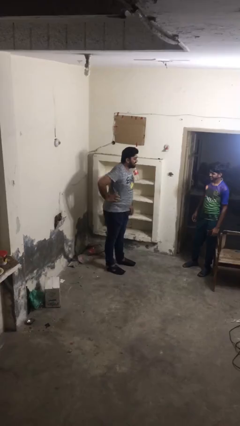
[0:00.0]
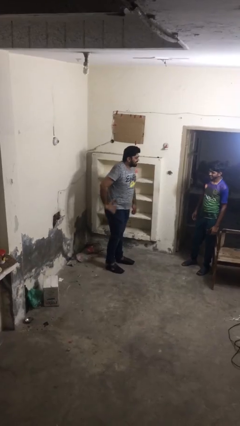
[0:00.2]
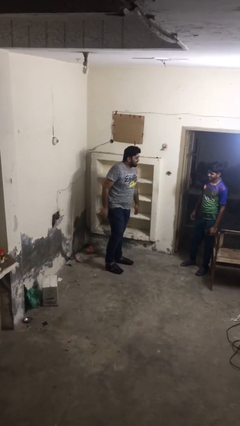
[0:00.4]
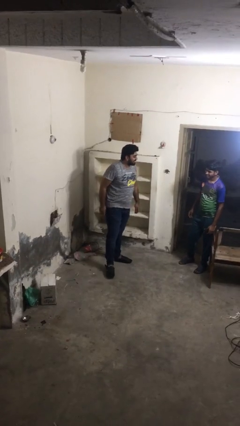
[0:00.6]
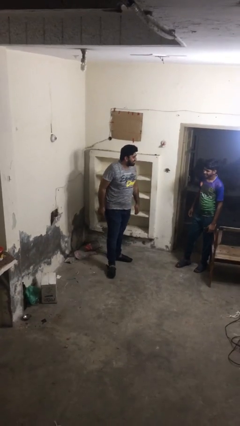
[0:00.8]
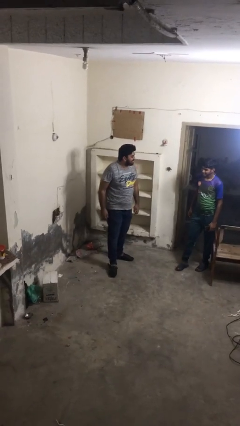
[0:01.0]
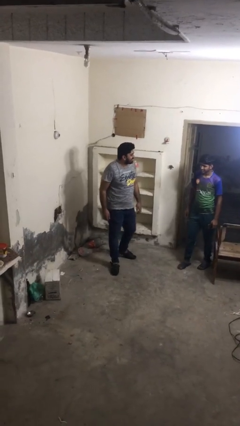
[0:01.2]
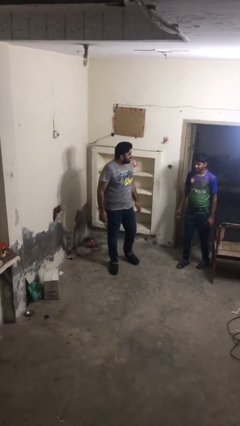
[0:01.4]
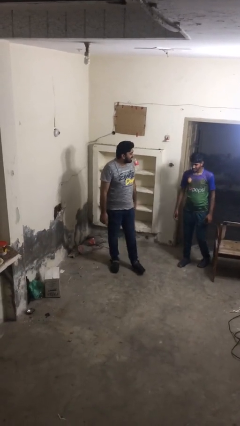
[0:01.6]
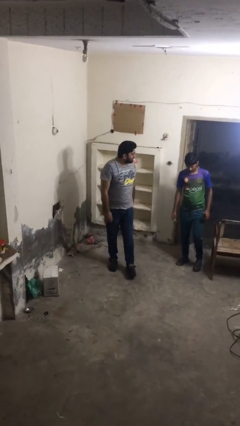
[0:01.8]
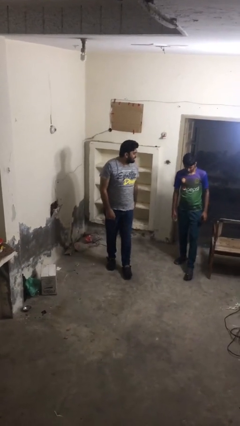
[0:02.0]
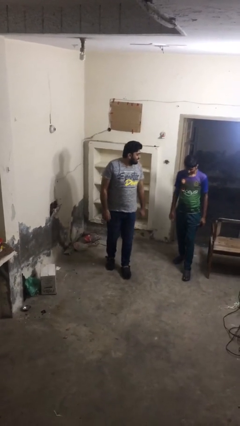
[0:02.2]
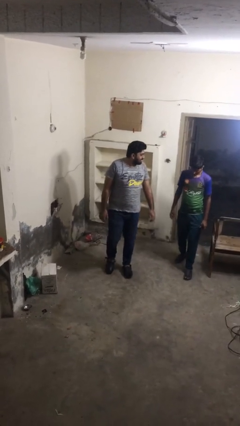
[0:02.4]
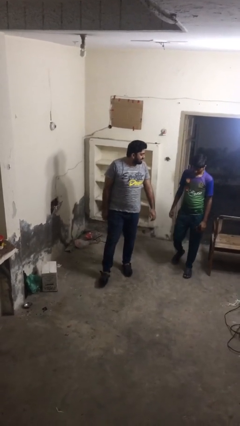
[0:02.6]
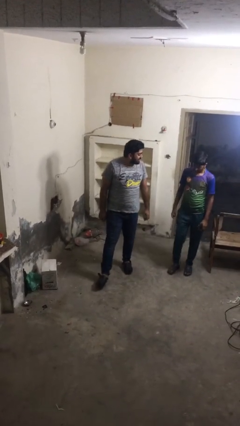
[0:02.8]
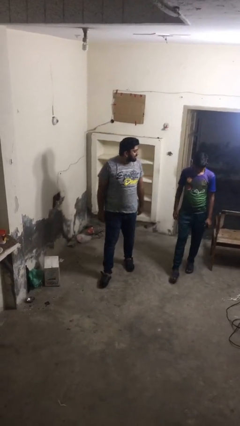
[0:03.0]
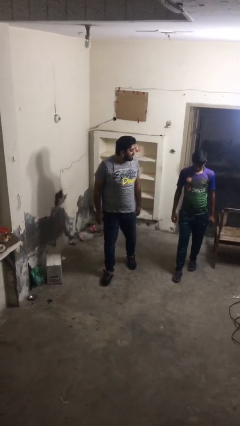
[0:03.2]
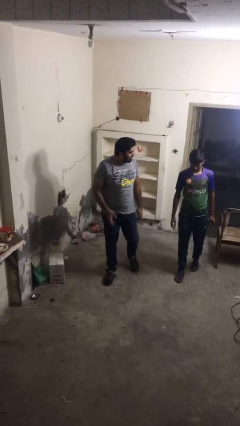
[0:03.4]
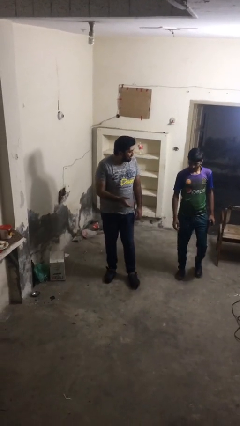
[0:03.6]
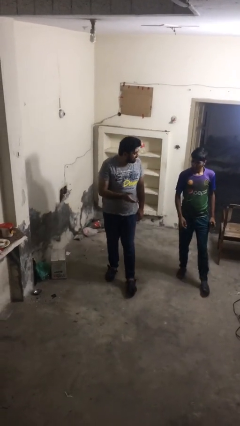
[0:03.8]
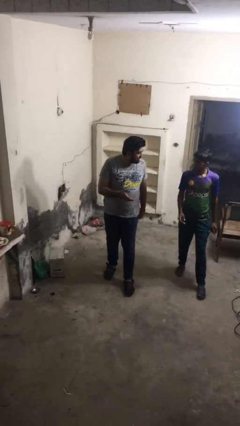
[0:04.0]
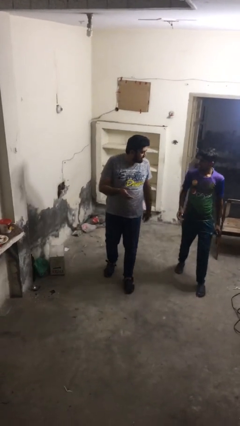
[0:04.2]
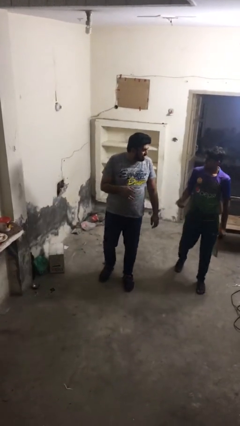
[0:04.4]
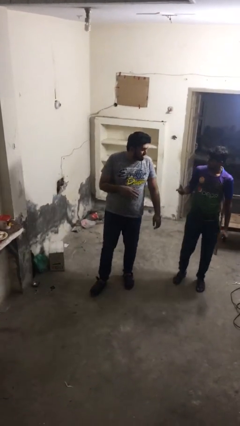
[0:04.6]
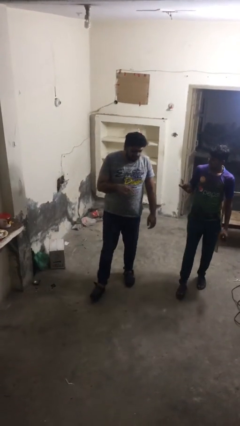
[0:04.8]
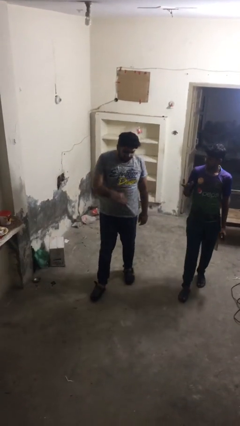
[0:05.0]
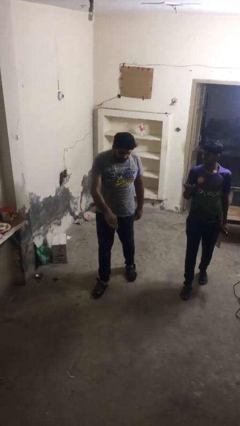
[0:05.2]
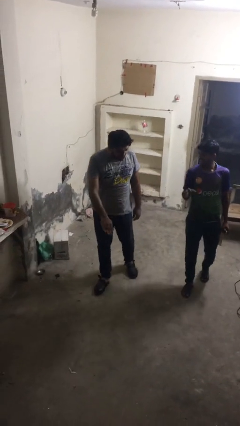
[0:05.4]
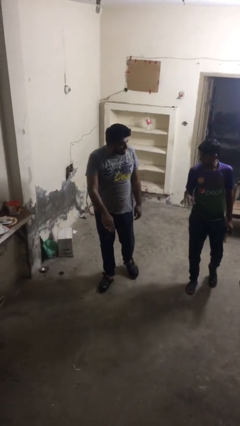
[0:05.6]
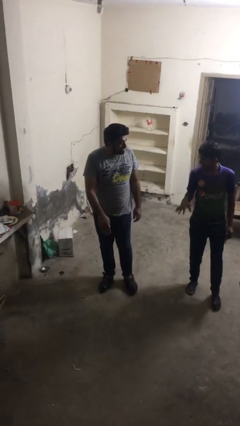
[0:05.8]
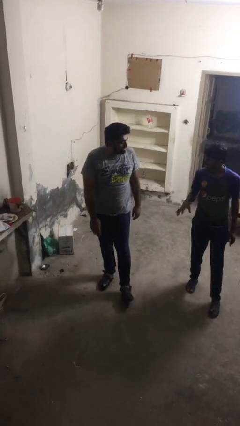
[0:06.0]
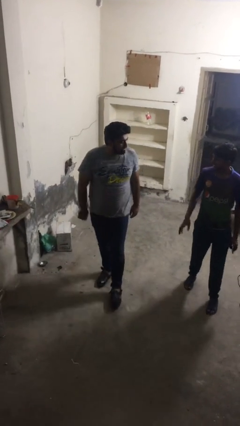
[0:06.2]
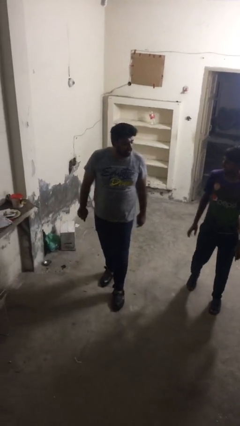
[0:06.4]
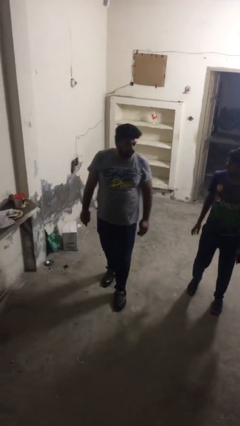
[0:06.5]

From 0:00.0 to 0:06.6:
person talks to person

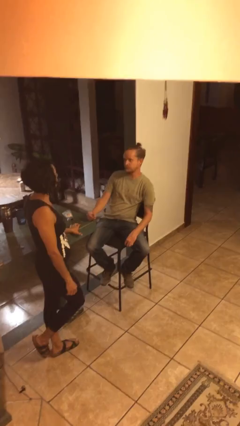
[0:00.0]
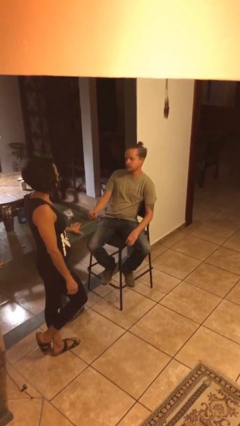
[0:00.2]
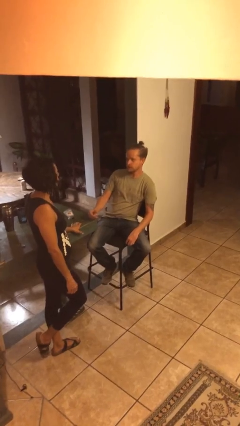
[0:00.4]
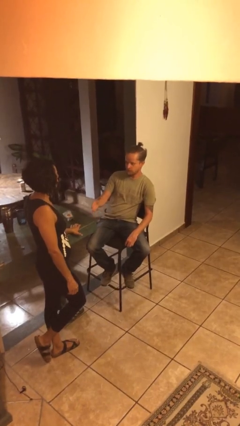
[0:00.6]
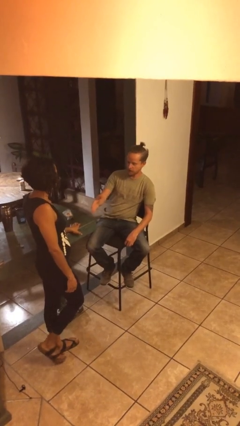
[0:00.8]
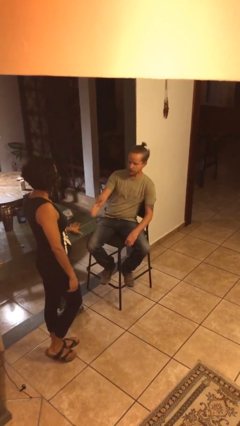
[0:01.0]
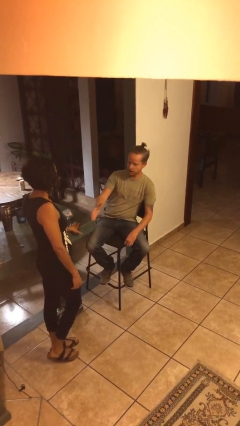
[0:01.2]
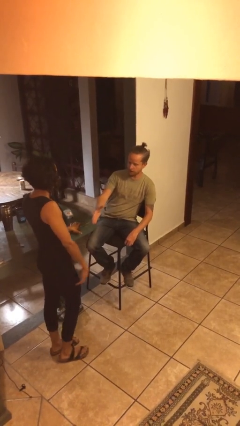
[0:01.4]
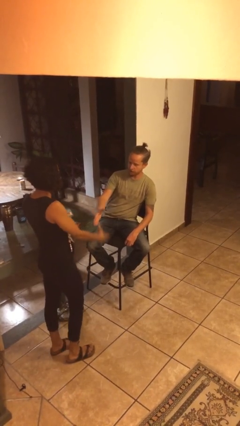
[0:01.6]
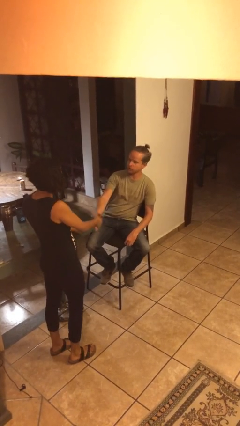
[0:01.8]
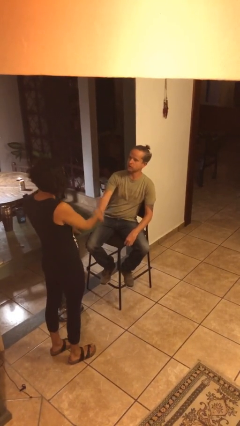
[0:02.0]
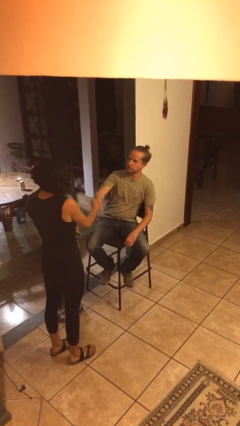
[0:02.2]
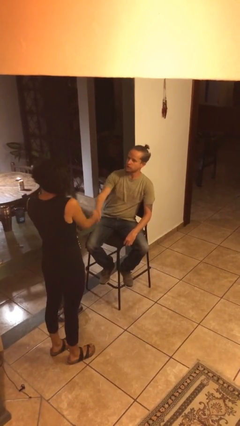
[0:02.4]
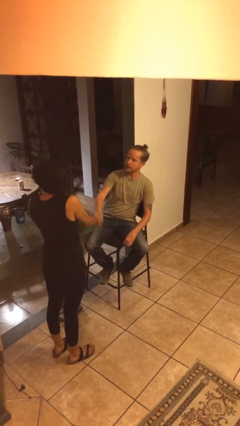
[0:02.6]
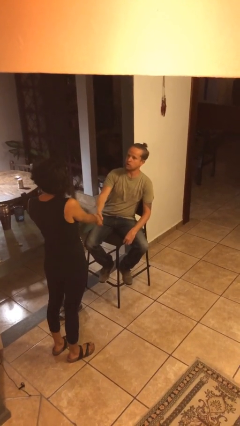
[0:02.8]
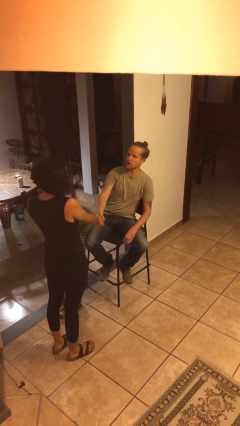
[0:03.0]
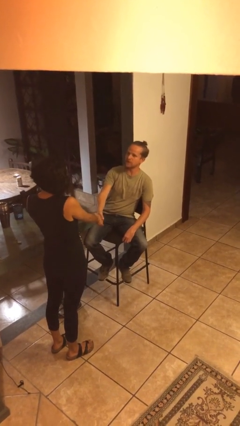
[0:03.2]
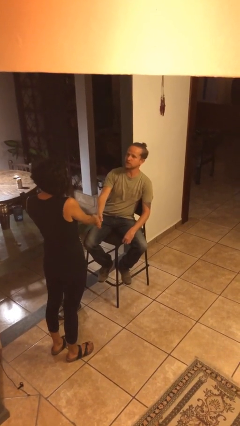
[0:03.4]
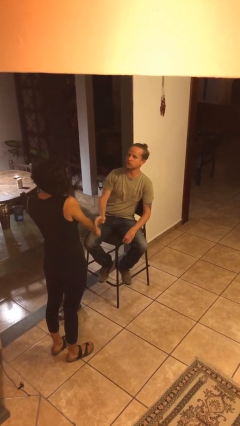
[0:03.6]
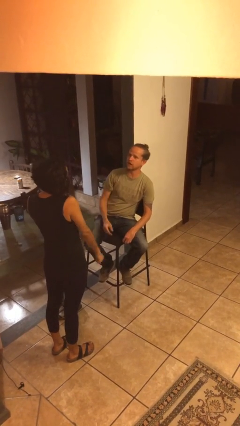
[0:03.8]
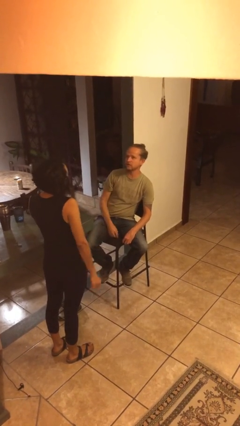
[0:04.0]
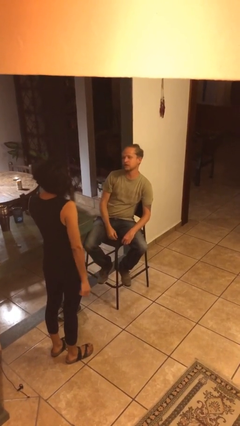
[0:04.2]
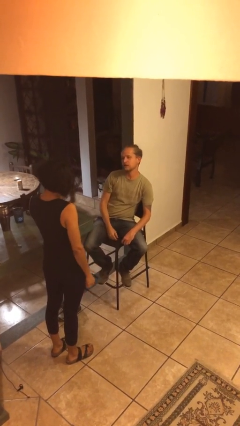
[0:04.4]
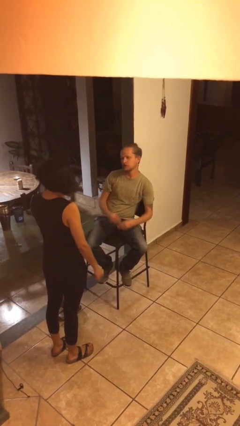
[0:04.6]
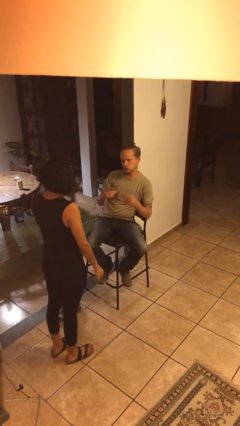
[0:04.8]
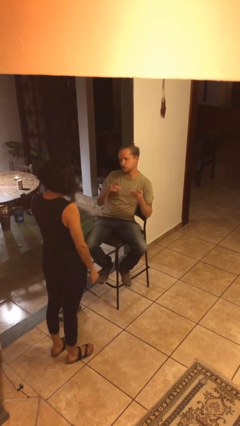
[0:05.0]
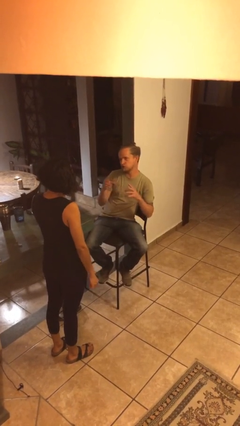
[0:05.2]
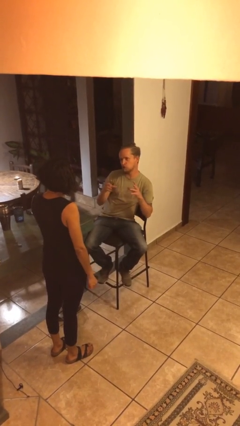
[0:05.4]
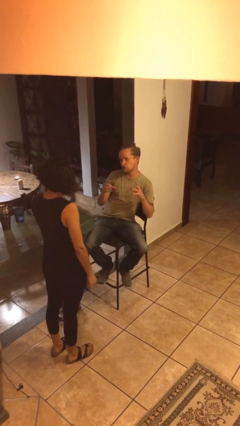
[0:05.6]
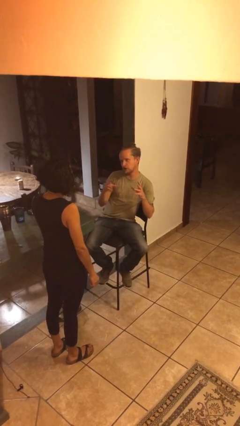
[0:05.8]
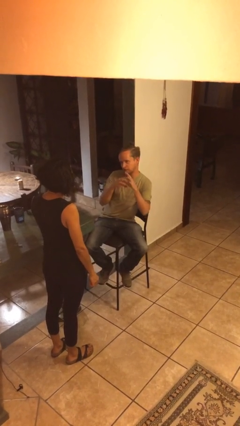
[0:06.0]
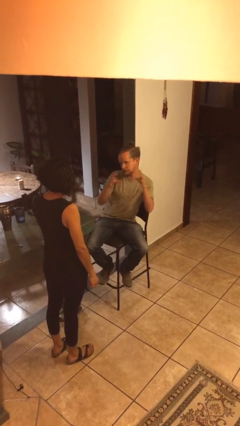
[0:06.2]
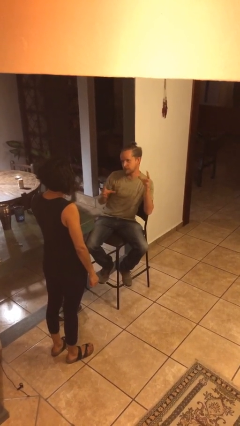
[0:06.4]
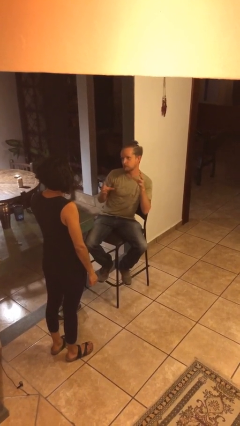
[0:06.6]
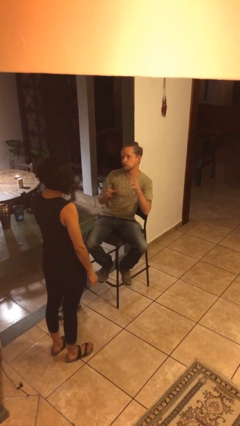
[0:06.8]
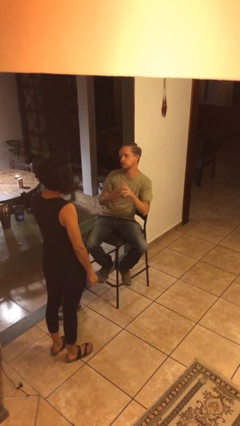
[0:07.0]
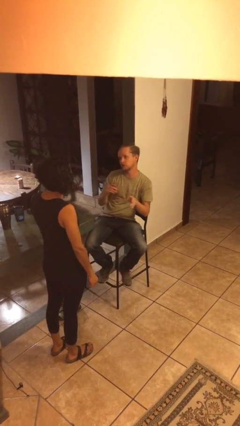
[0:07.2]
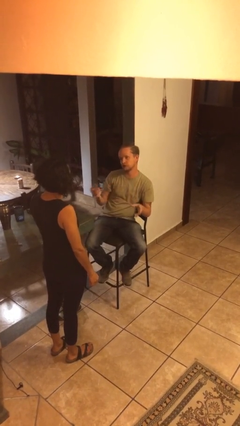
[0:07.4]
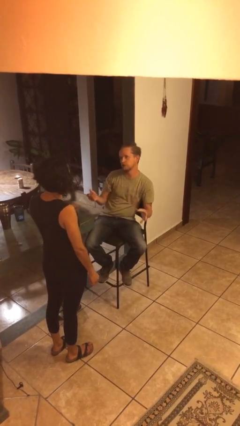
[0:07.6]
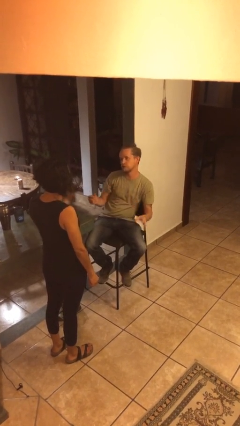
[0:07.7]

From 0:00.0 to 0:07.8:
person shakes hand

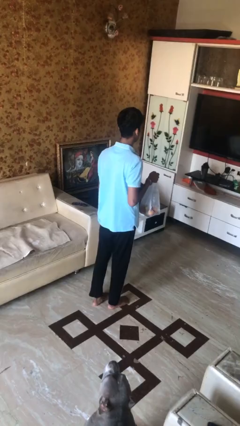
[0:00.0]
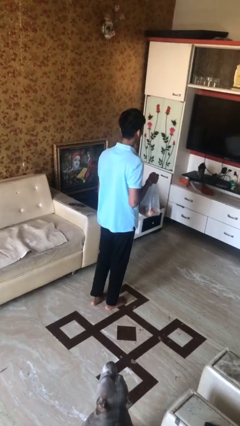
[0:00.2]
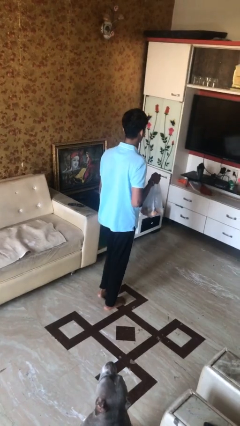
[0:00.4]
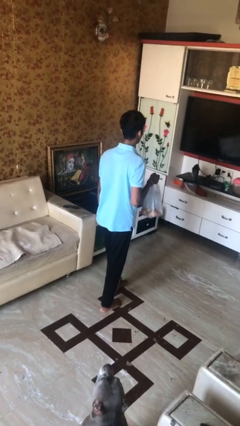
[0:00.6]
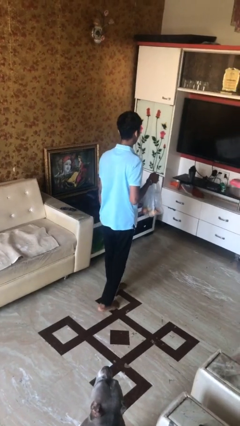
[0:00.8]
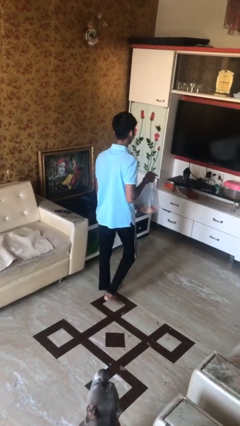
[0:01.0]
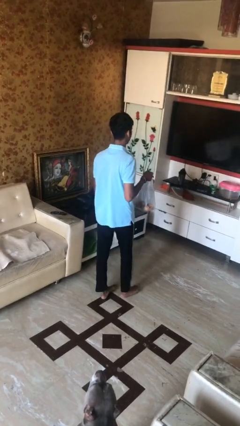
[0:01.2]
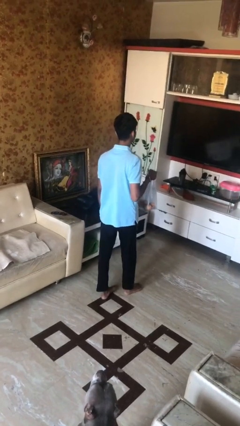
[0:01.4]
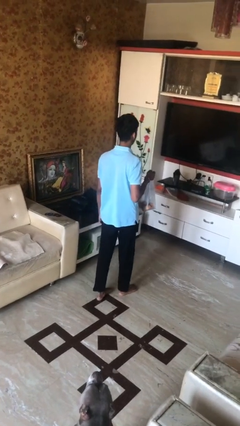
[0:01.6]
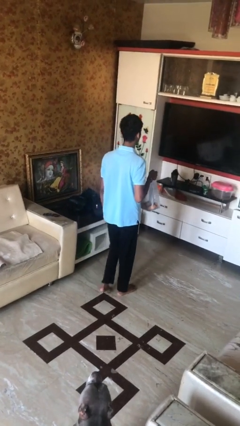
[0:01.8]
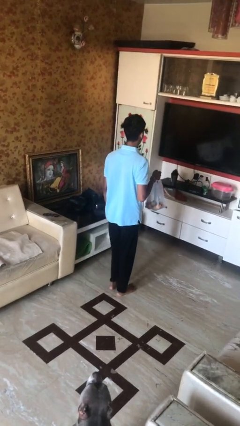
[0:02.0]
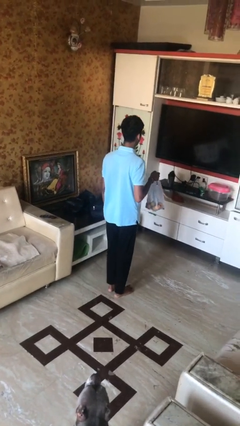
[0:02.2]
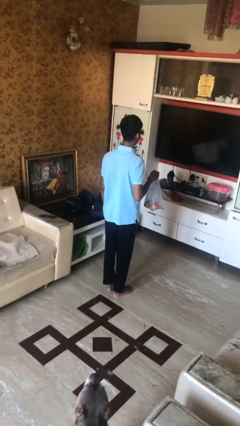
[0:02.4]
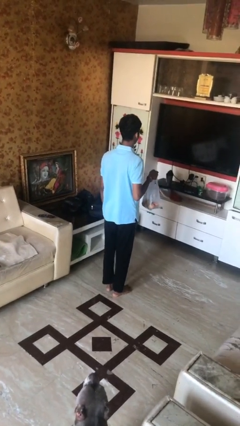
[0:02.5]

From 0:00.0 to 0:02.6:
person carries groceries

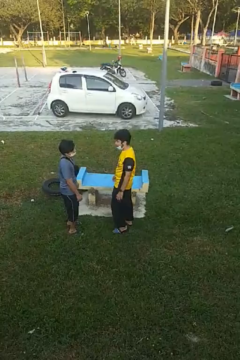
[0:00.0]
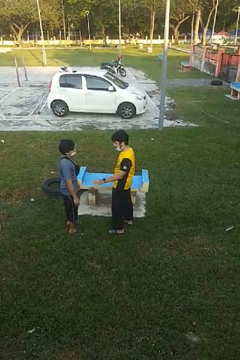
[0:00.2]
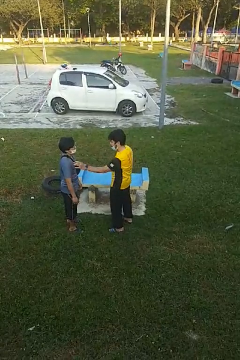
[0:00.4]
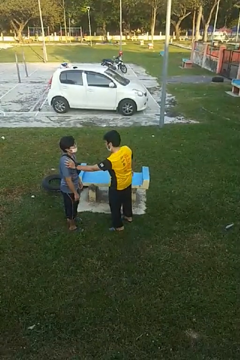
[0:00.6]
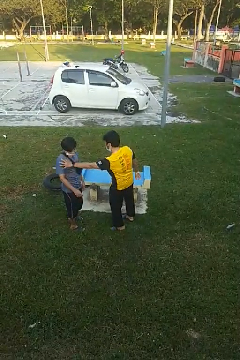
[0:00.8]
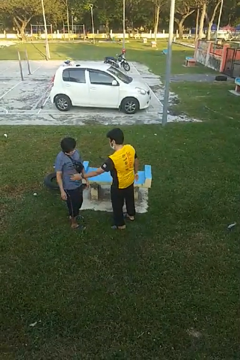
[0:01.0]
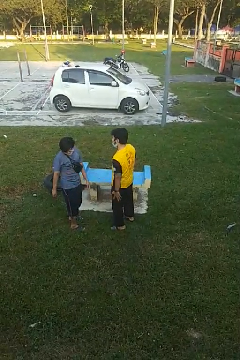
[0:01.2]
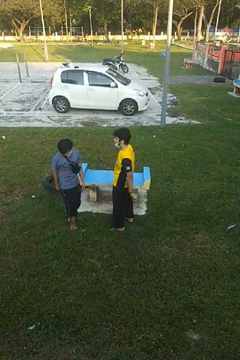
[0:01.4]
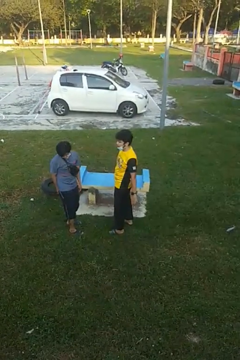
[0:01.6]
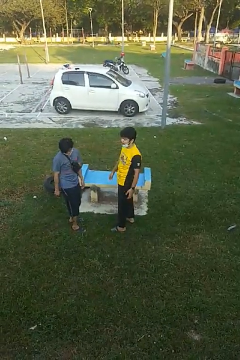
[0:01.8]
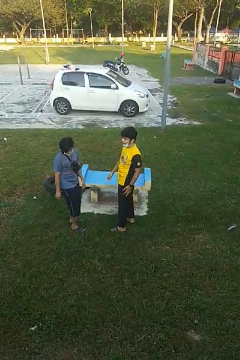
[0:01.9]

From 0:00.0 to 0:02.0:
person shoves person
